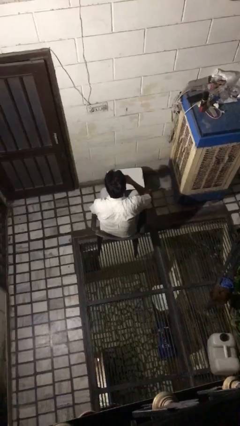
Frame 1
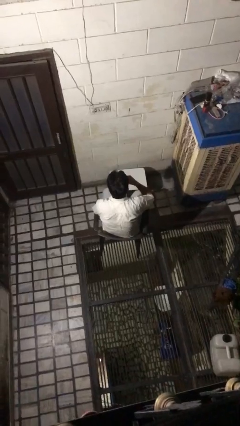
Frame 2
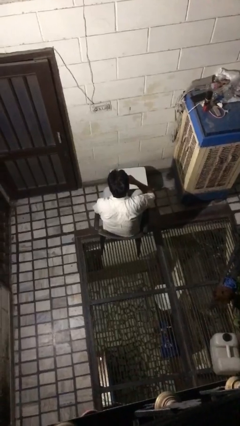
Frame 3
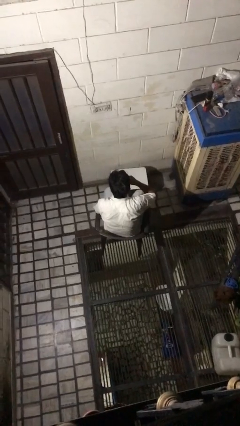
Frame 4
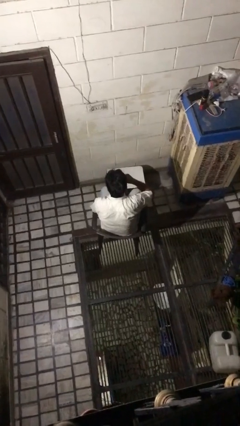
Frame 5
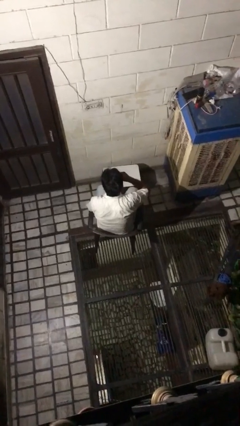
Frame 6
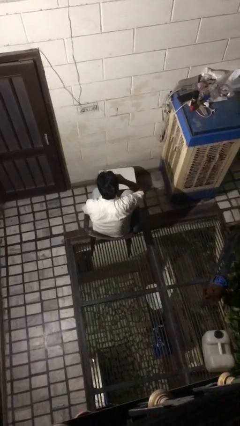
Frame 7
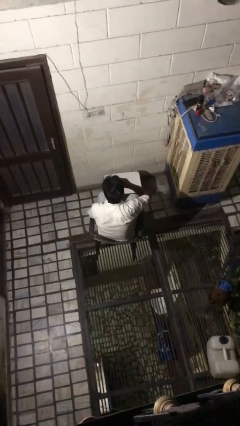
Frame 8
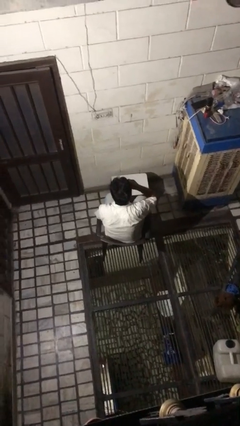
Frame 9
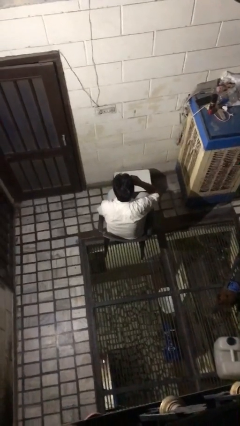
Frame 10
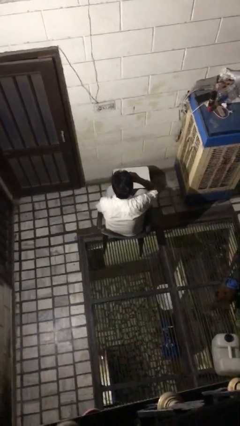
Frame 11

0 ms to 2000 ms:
person drinks from mug

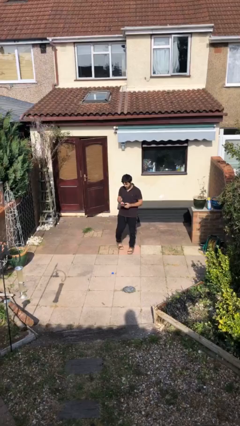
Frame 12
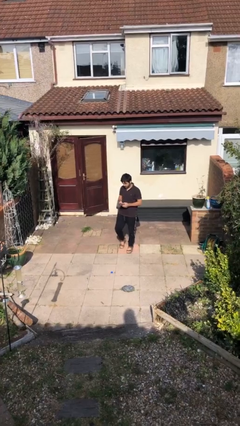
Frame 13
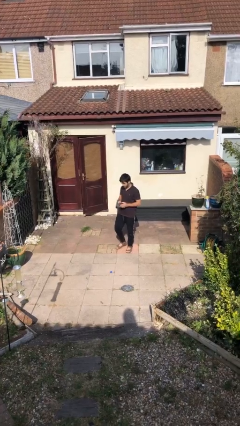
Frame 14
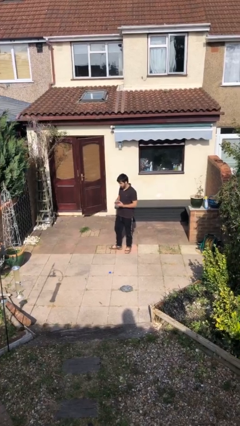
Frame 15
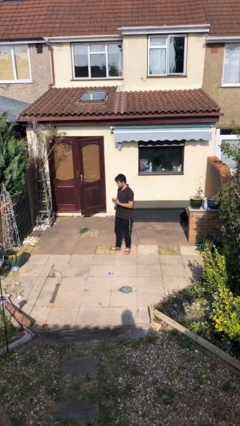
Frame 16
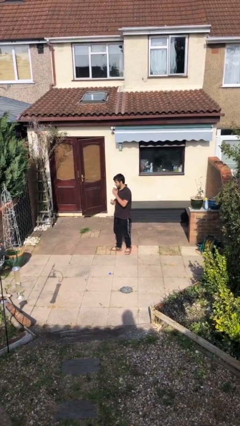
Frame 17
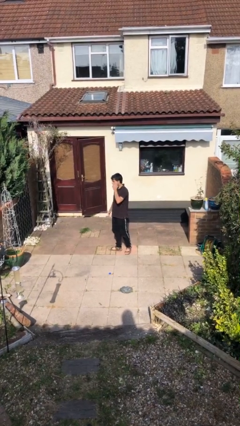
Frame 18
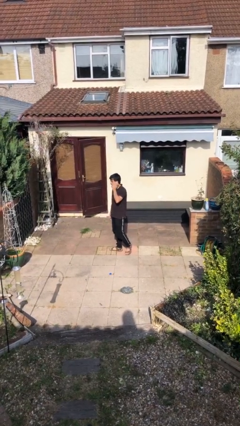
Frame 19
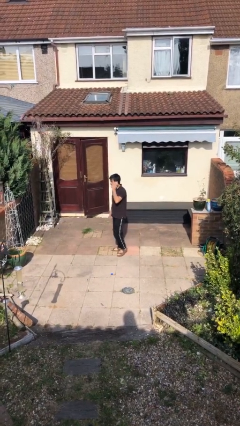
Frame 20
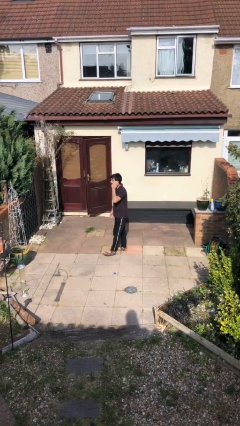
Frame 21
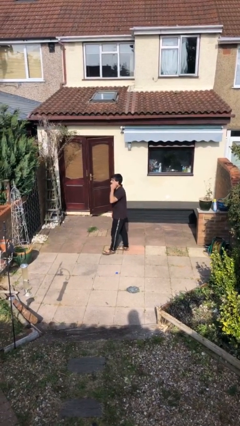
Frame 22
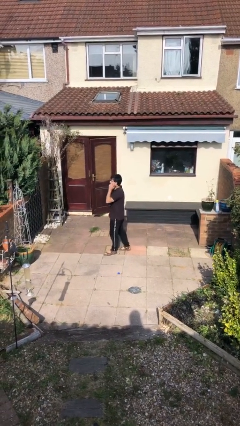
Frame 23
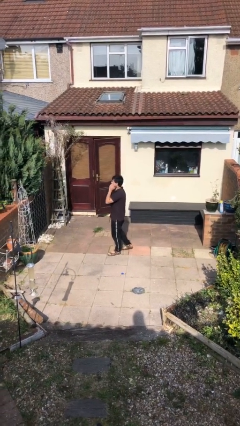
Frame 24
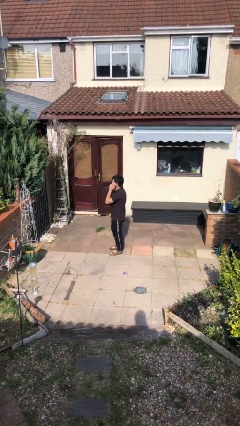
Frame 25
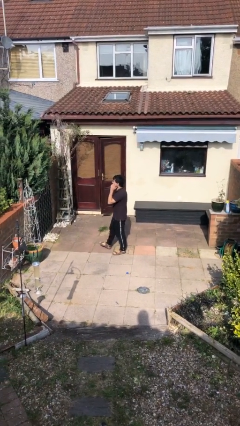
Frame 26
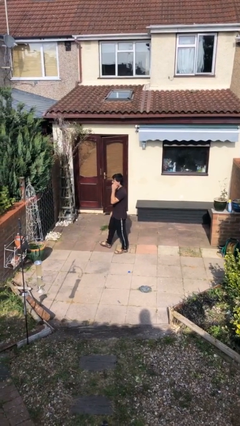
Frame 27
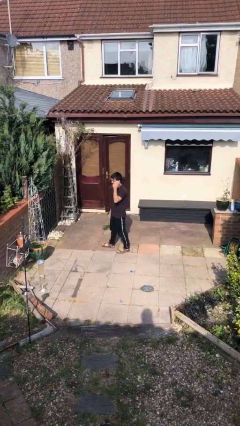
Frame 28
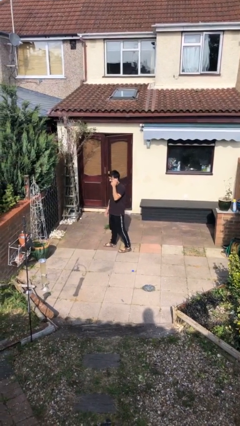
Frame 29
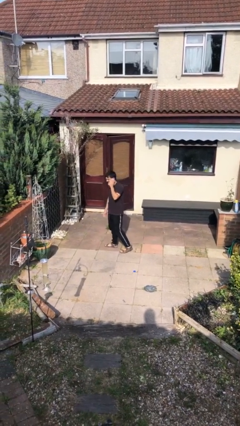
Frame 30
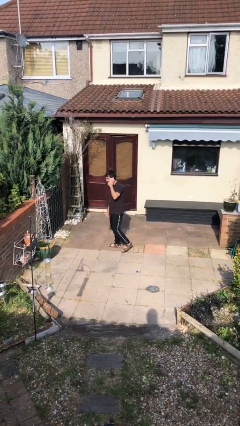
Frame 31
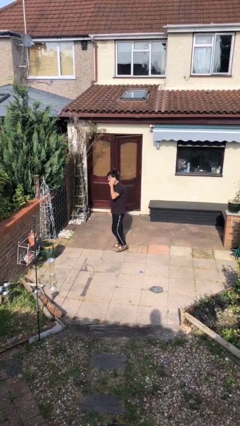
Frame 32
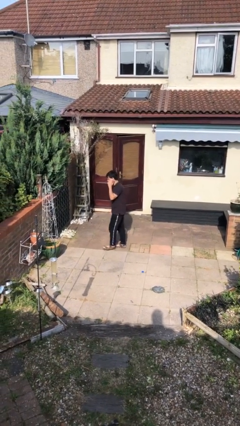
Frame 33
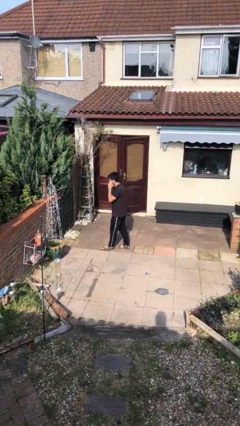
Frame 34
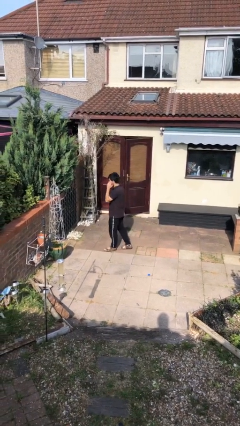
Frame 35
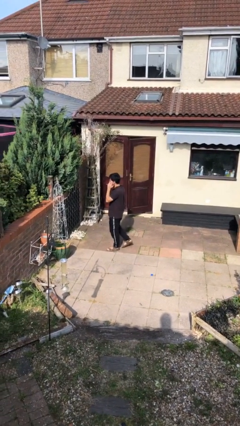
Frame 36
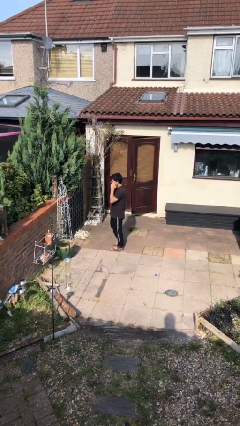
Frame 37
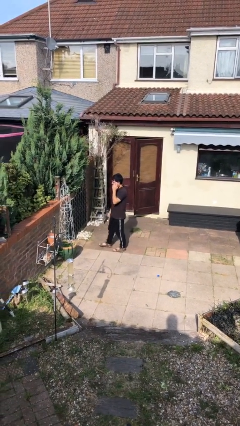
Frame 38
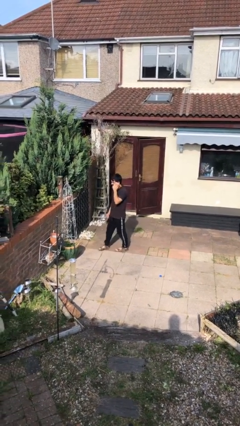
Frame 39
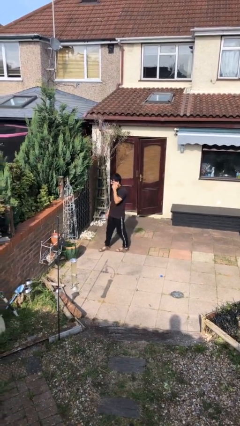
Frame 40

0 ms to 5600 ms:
person talks on phone

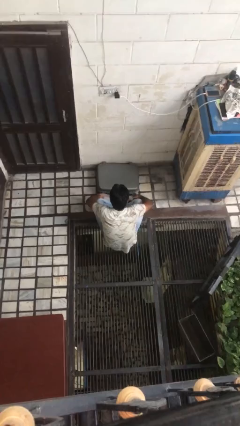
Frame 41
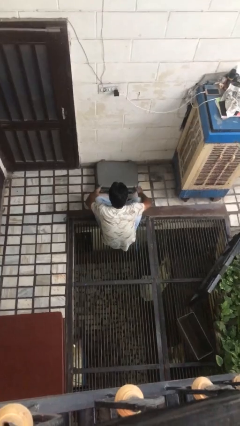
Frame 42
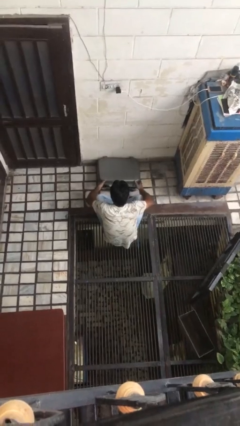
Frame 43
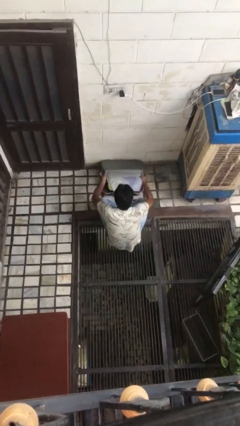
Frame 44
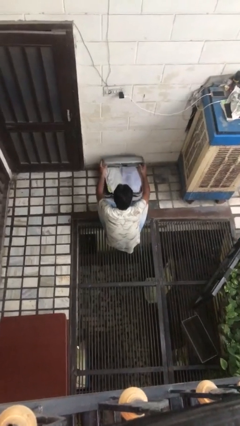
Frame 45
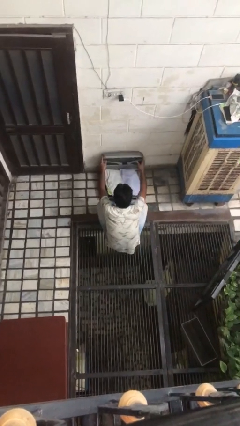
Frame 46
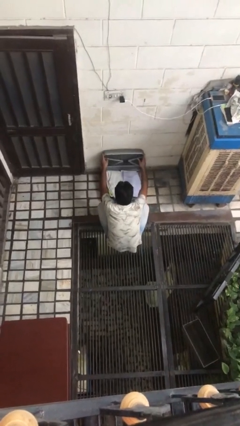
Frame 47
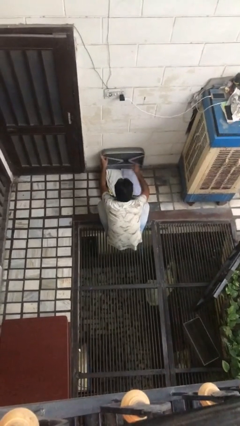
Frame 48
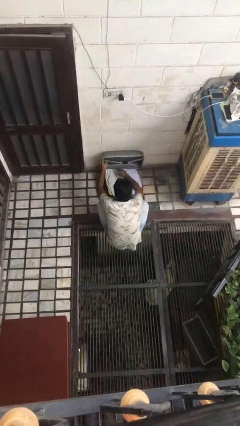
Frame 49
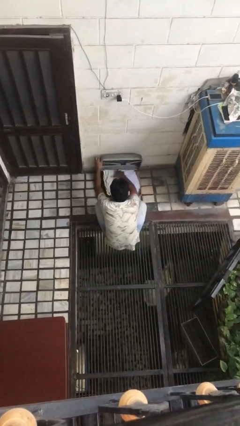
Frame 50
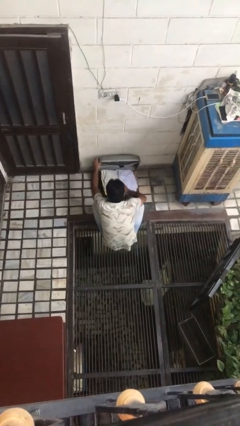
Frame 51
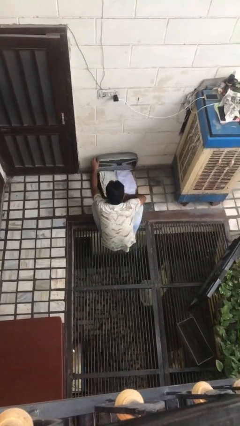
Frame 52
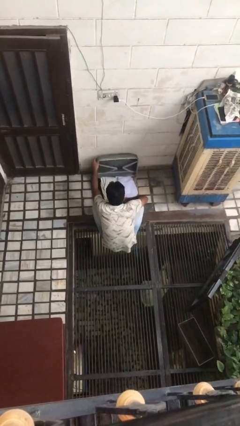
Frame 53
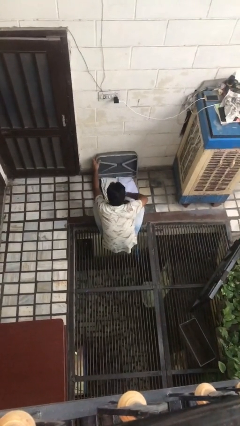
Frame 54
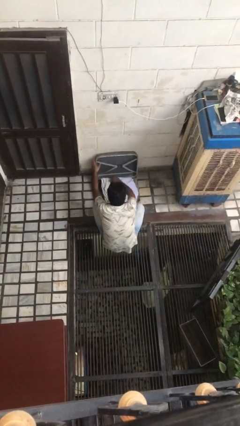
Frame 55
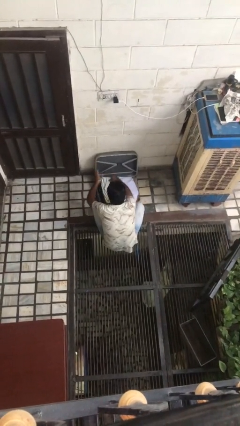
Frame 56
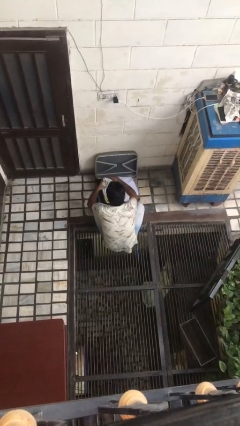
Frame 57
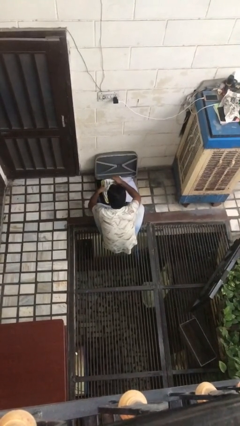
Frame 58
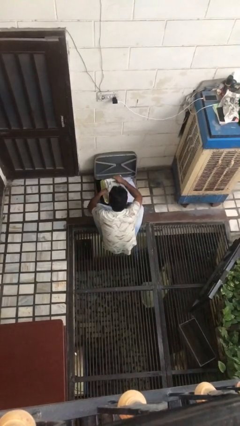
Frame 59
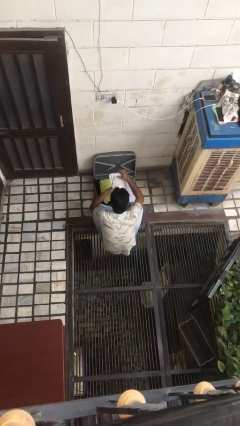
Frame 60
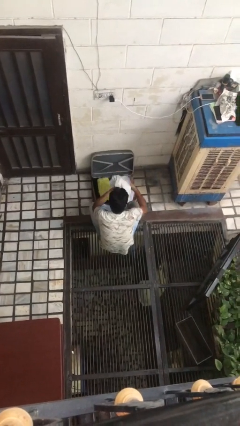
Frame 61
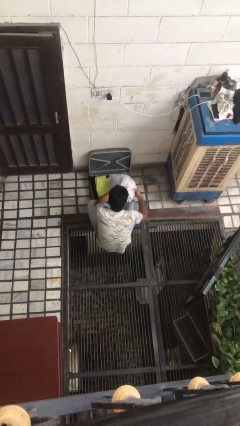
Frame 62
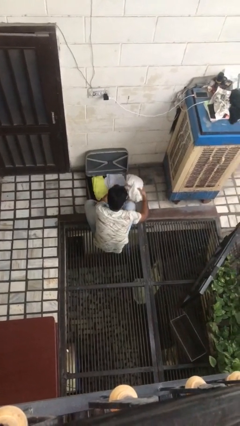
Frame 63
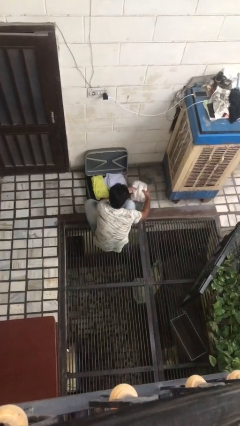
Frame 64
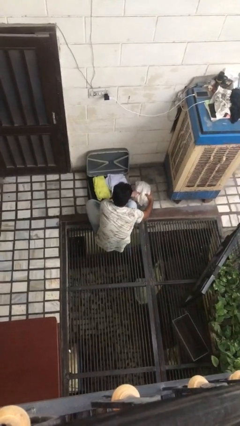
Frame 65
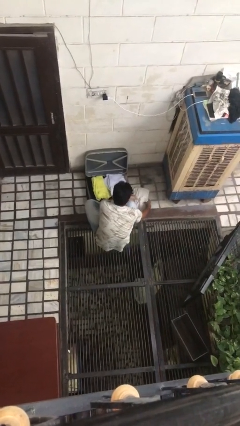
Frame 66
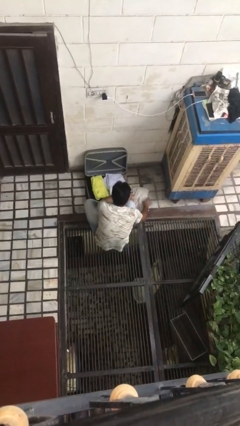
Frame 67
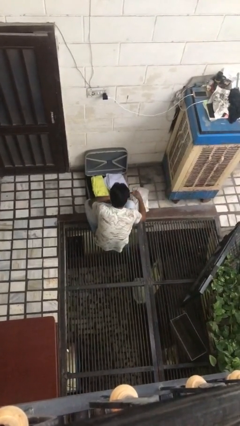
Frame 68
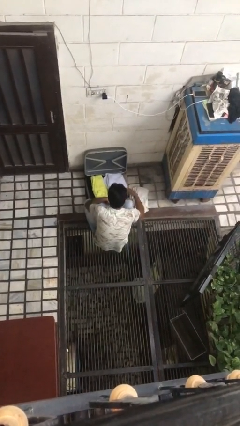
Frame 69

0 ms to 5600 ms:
person unloads clothes from suitcase

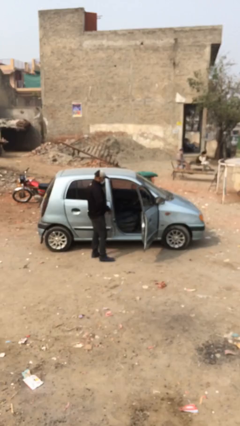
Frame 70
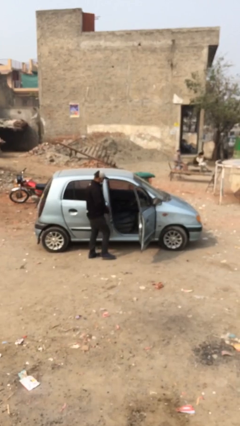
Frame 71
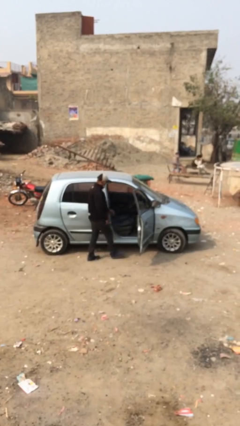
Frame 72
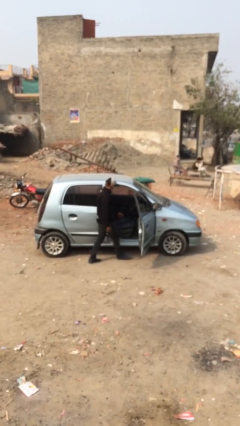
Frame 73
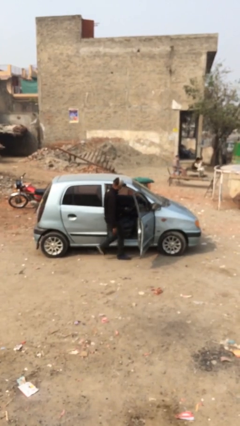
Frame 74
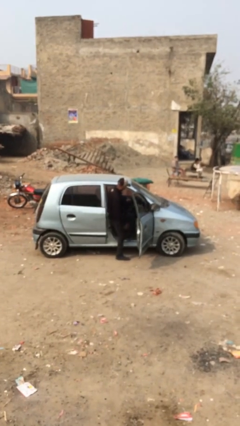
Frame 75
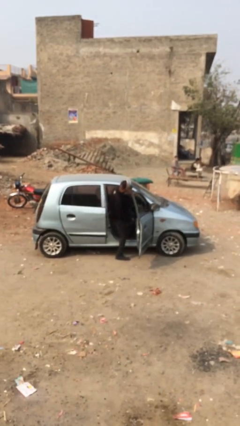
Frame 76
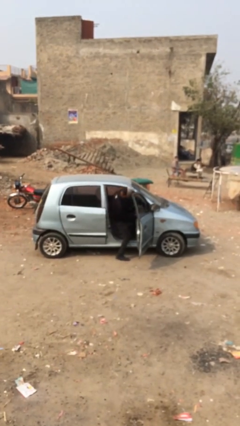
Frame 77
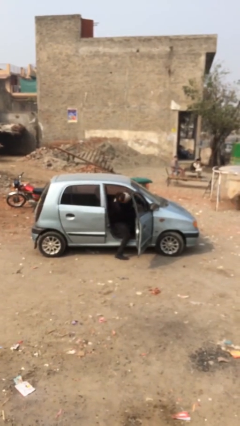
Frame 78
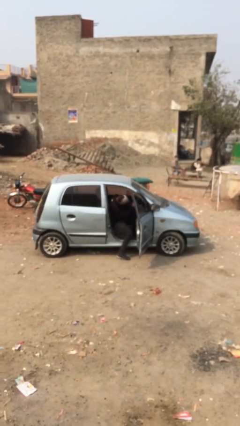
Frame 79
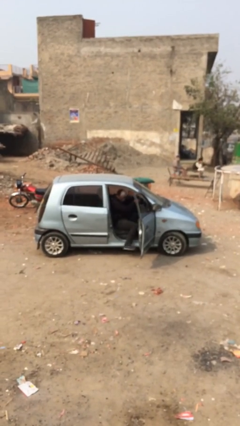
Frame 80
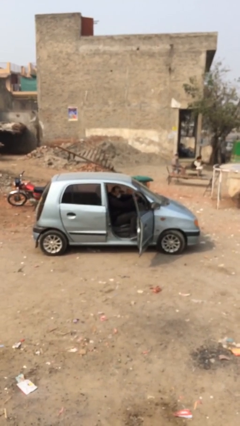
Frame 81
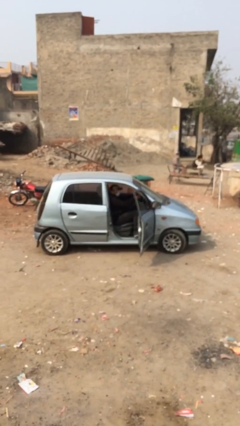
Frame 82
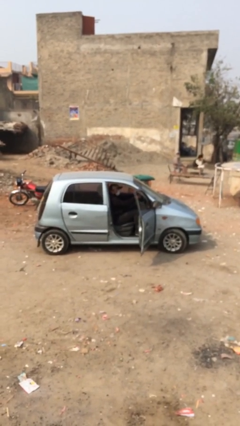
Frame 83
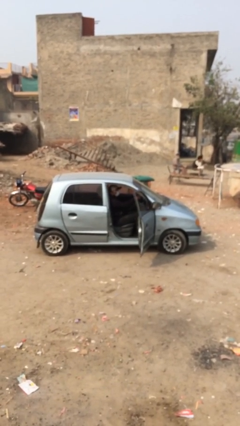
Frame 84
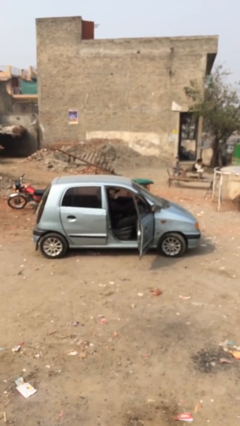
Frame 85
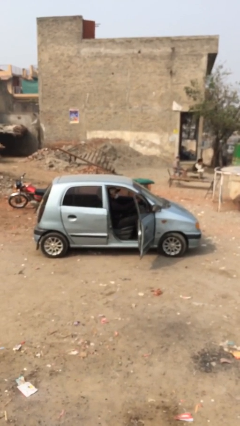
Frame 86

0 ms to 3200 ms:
person enters car

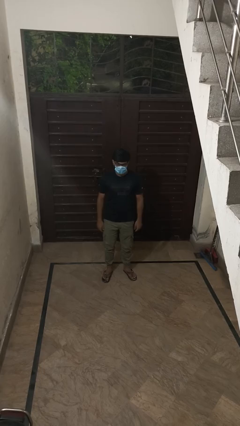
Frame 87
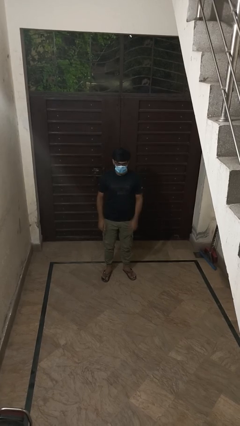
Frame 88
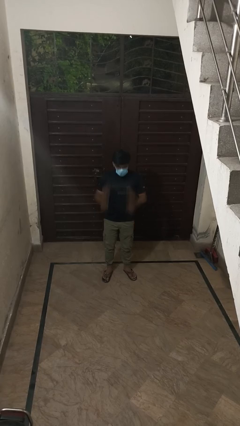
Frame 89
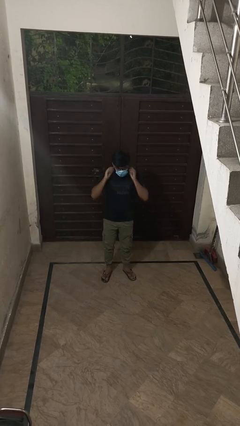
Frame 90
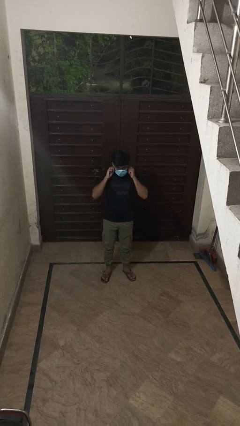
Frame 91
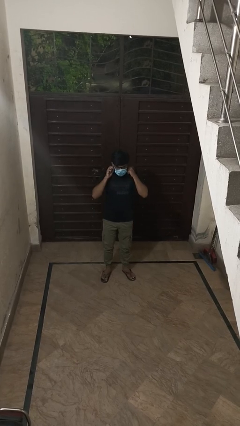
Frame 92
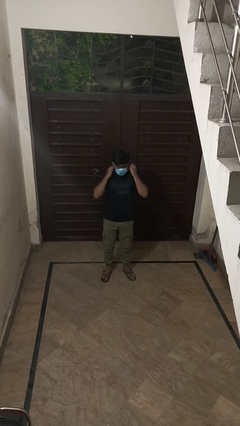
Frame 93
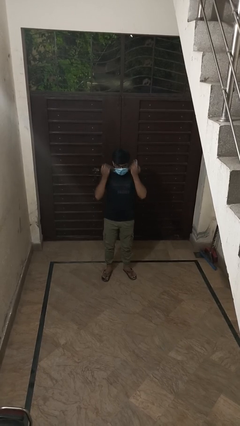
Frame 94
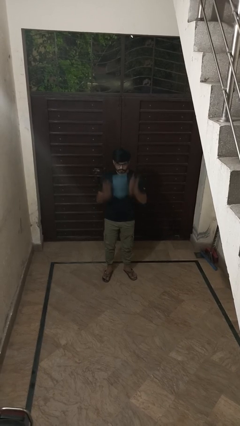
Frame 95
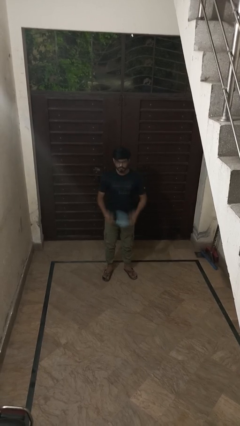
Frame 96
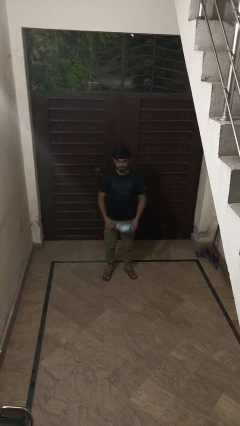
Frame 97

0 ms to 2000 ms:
person takes off facemask
